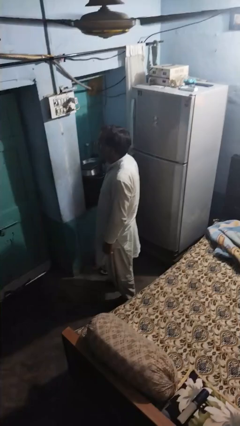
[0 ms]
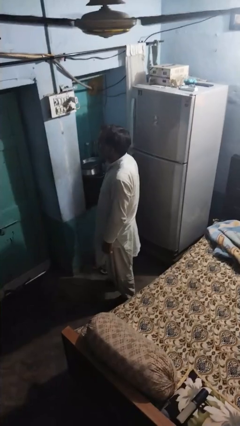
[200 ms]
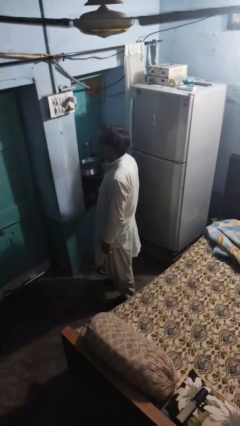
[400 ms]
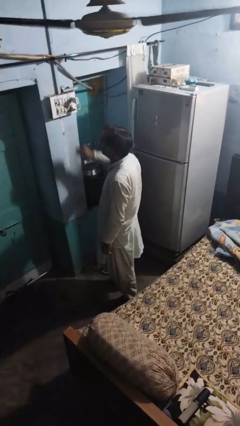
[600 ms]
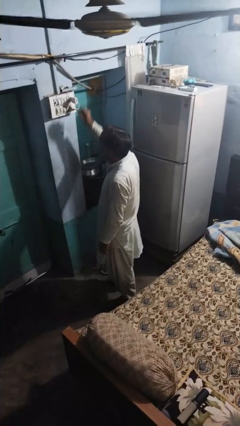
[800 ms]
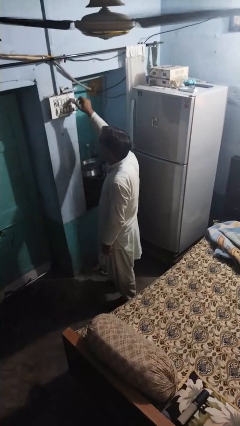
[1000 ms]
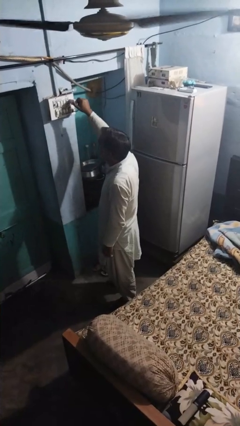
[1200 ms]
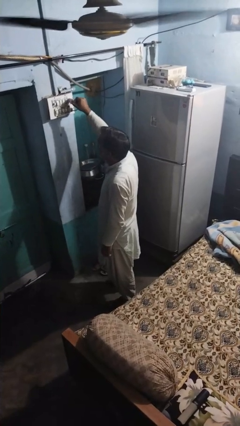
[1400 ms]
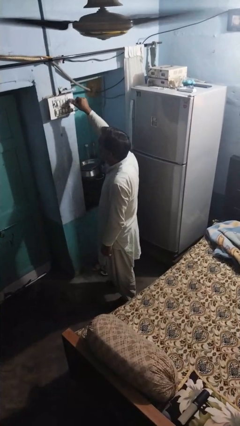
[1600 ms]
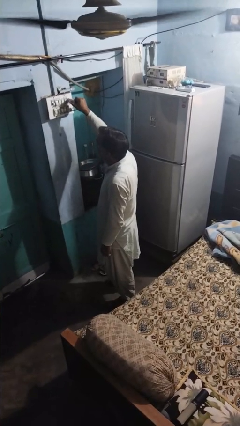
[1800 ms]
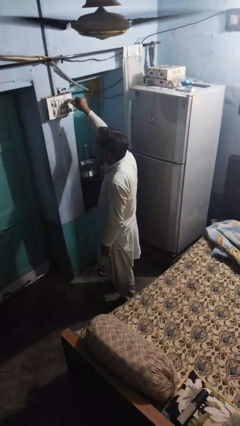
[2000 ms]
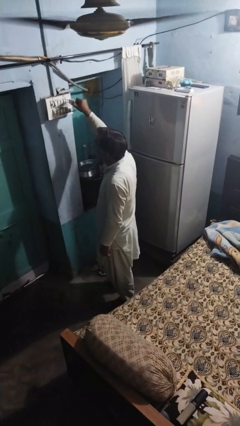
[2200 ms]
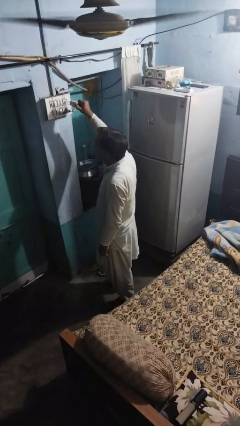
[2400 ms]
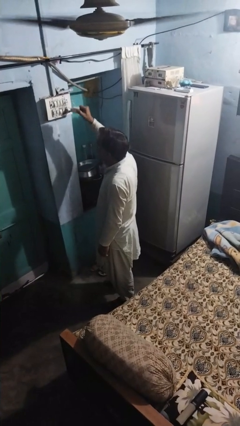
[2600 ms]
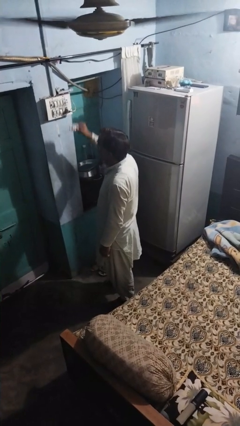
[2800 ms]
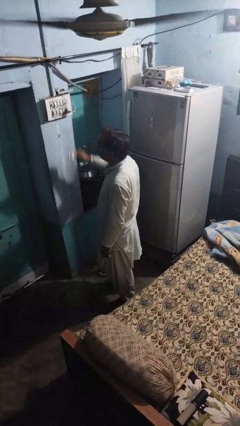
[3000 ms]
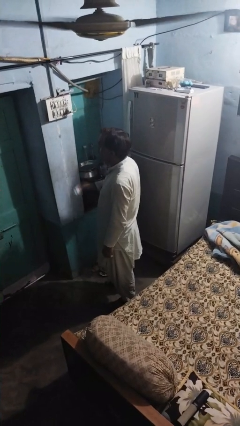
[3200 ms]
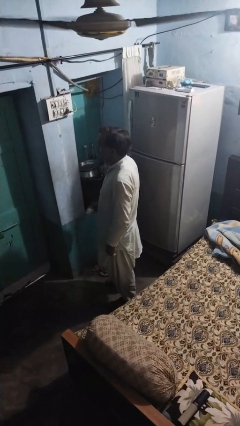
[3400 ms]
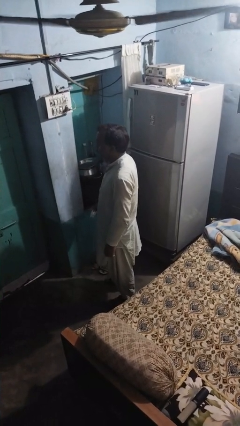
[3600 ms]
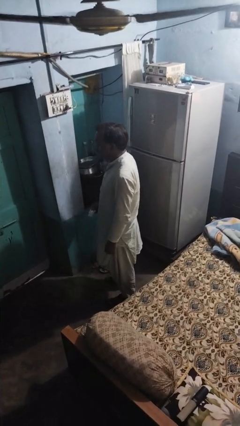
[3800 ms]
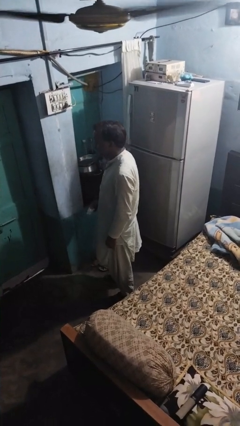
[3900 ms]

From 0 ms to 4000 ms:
person unplugs from electrical socket

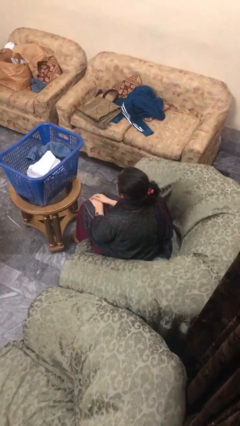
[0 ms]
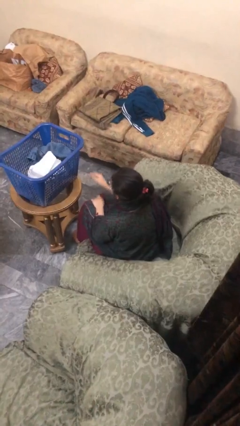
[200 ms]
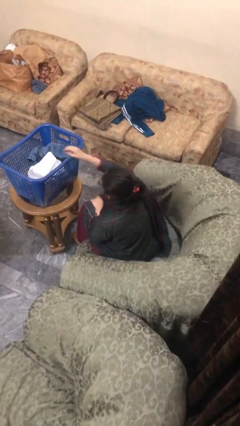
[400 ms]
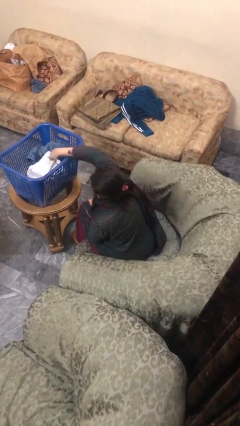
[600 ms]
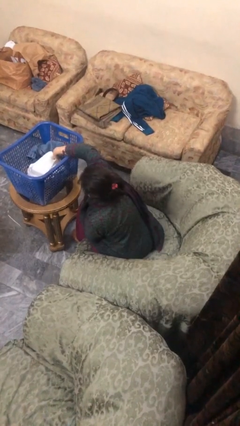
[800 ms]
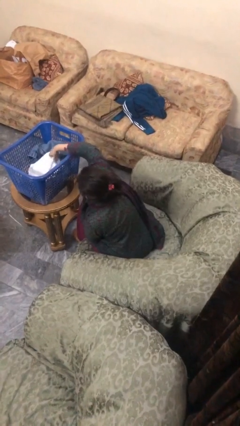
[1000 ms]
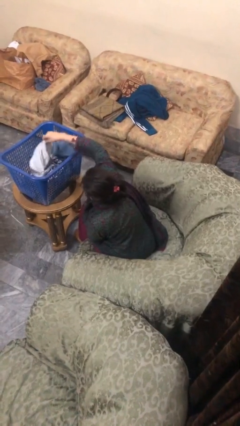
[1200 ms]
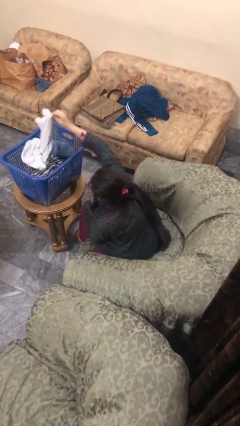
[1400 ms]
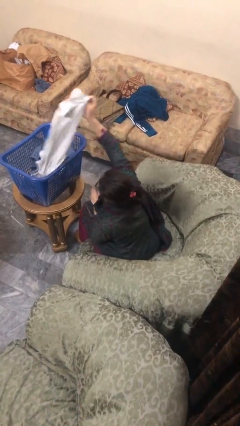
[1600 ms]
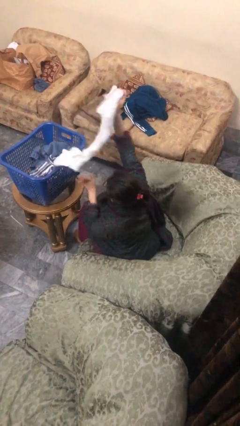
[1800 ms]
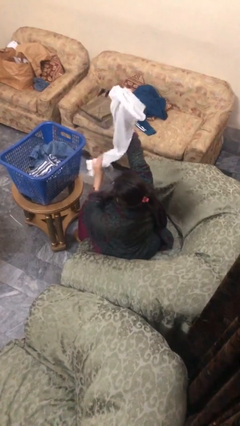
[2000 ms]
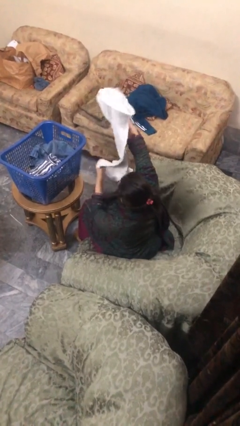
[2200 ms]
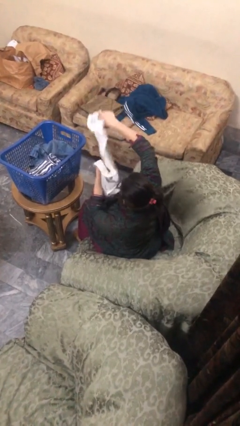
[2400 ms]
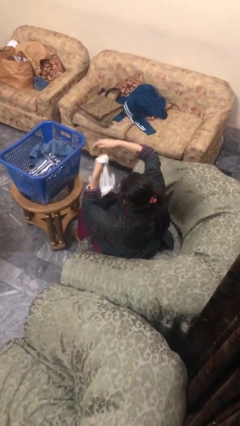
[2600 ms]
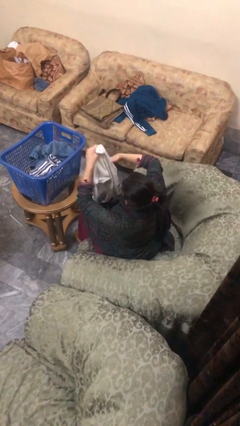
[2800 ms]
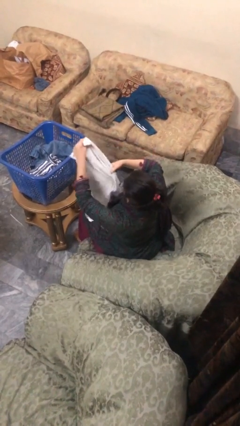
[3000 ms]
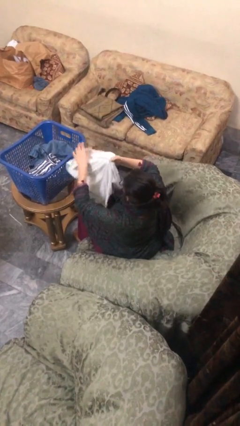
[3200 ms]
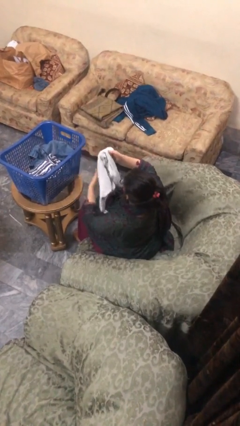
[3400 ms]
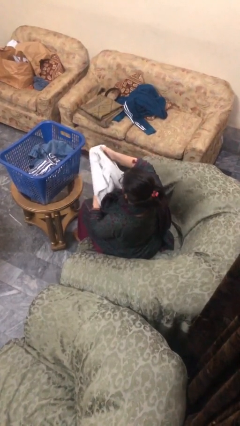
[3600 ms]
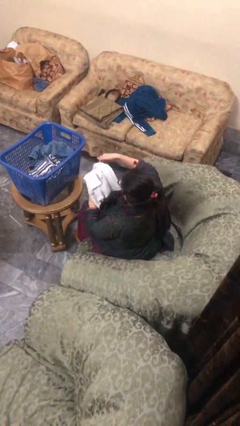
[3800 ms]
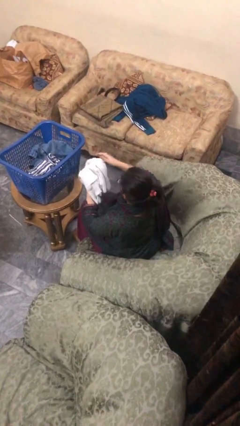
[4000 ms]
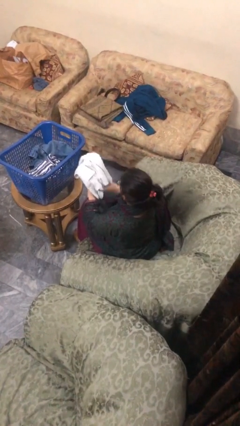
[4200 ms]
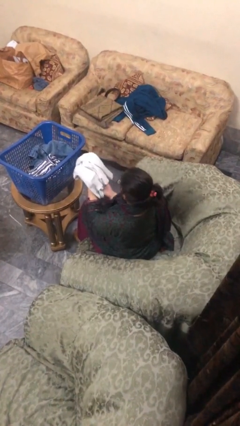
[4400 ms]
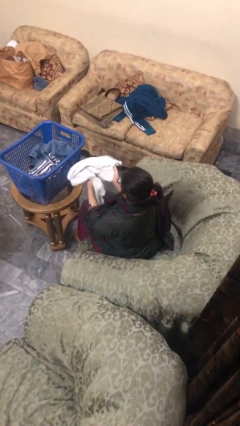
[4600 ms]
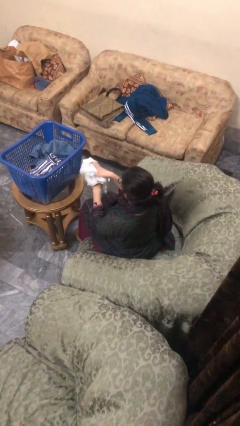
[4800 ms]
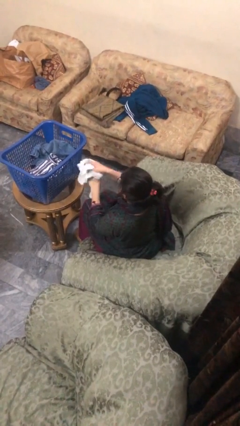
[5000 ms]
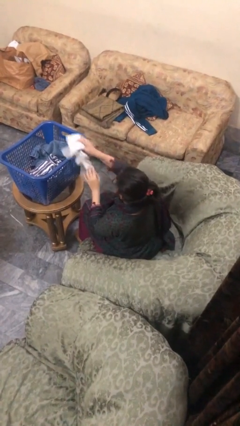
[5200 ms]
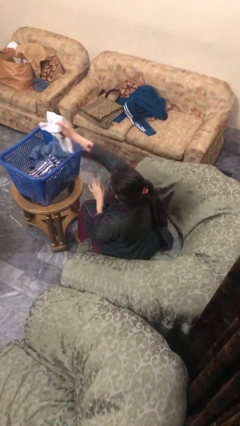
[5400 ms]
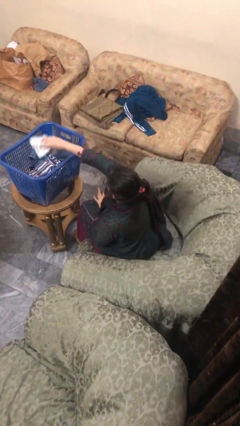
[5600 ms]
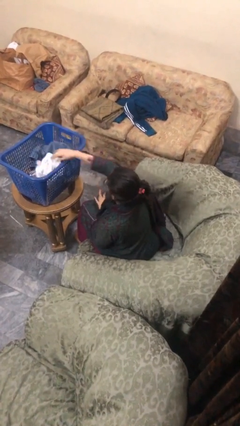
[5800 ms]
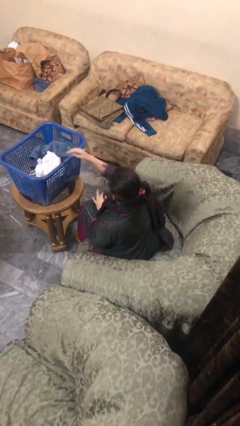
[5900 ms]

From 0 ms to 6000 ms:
person folds shirt

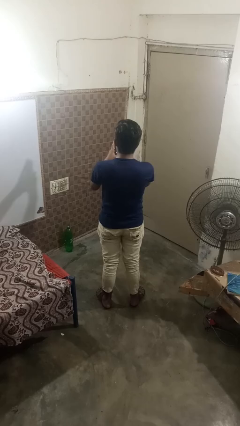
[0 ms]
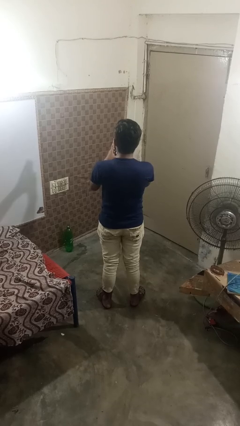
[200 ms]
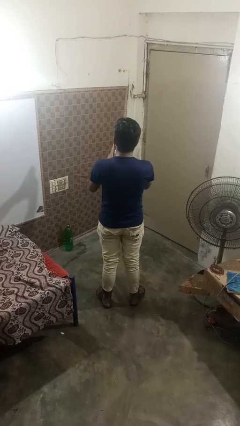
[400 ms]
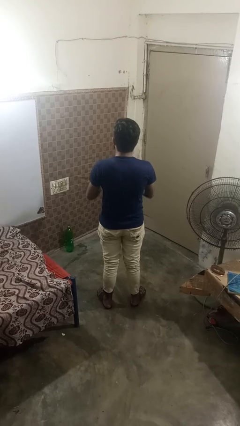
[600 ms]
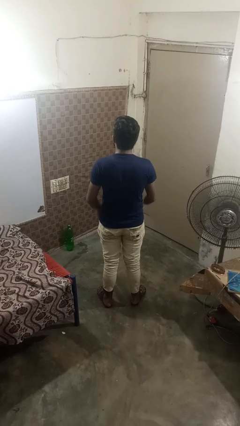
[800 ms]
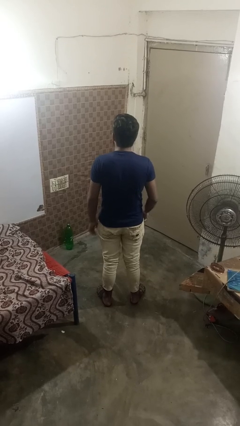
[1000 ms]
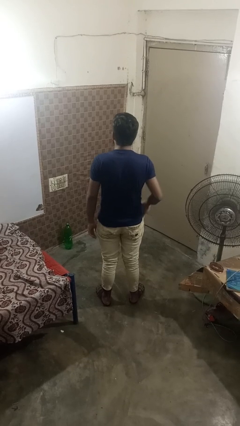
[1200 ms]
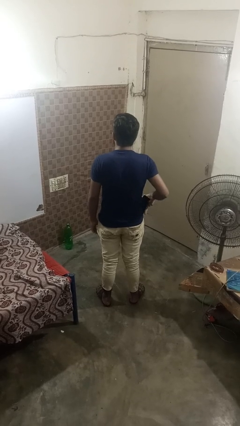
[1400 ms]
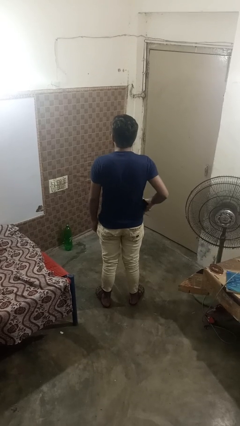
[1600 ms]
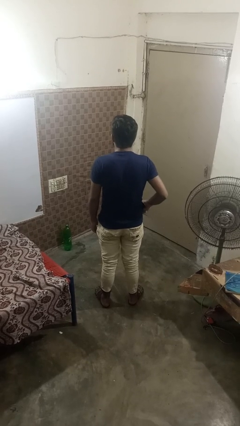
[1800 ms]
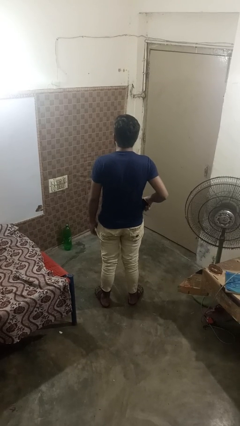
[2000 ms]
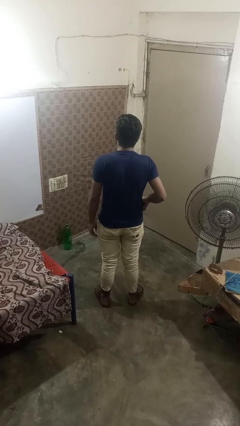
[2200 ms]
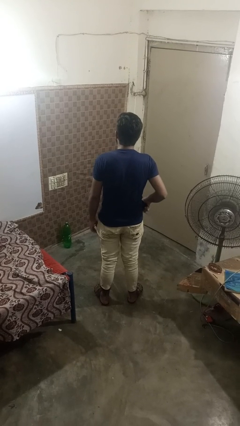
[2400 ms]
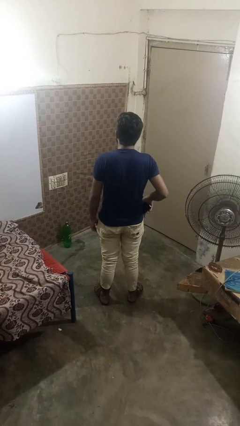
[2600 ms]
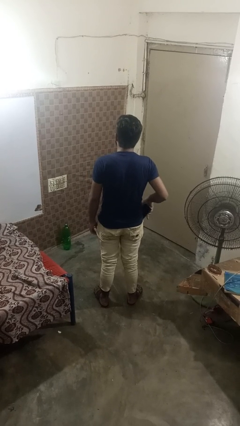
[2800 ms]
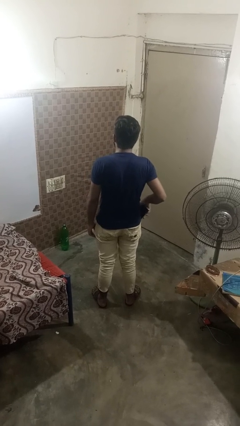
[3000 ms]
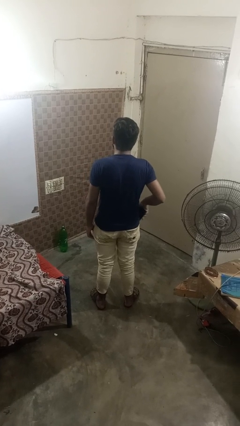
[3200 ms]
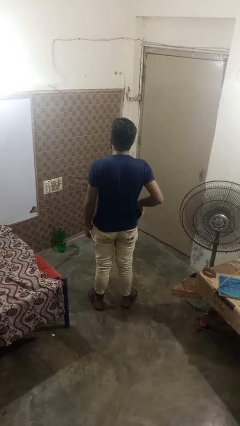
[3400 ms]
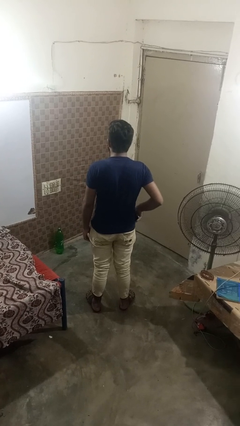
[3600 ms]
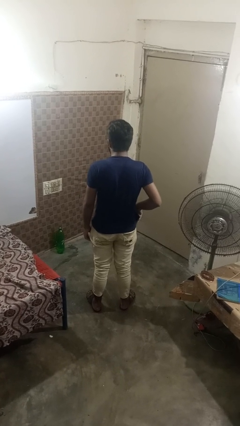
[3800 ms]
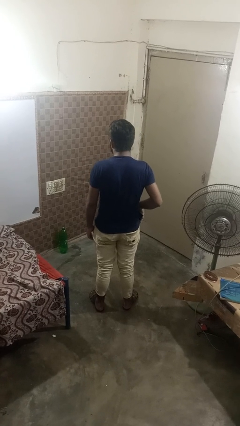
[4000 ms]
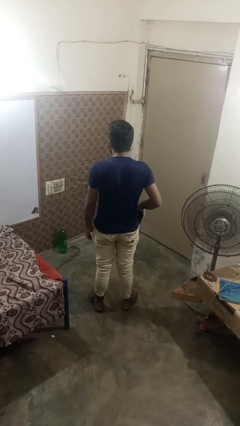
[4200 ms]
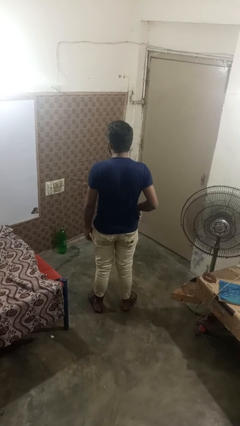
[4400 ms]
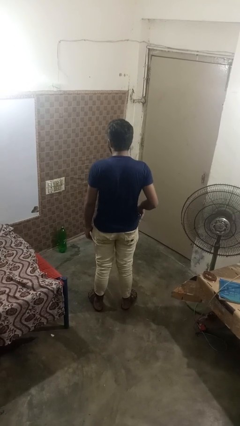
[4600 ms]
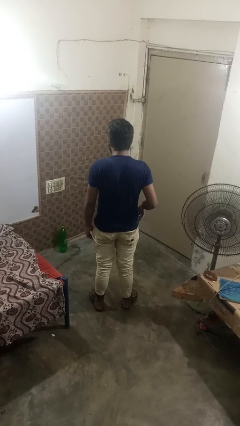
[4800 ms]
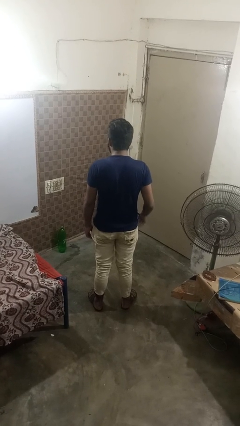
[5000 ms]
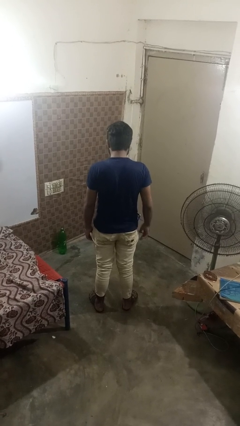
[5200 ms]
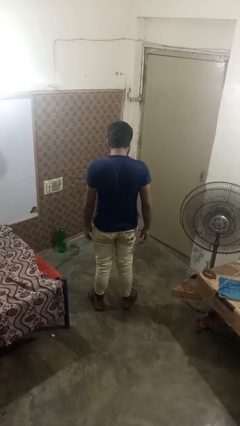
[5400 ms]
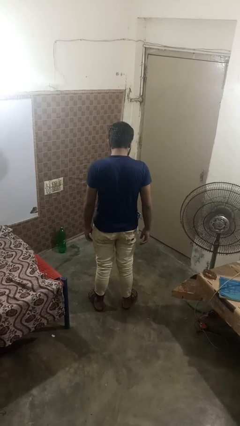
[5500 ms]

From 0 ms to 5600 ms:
person puts phone into pocket

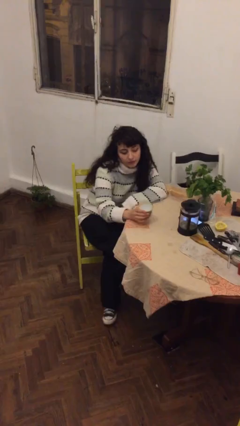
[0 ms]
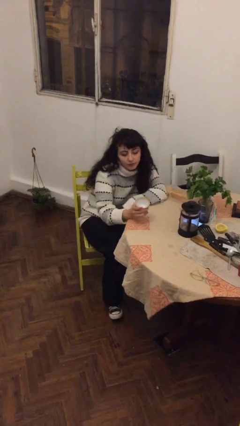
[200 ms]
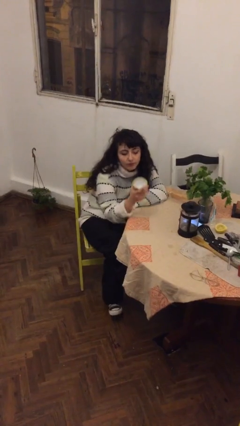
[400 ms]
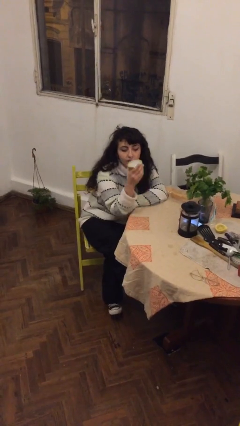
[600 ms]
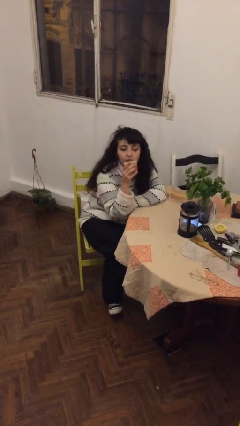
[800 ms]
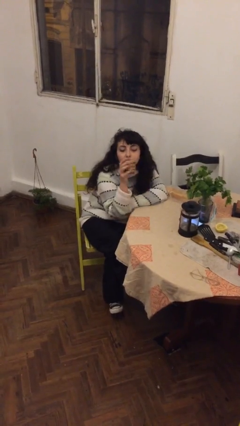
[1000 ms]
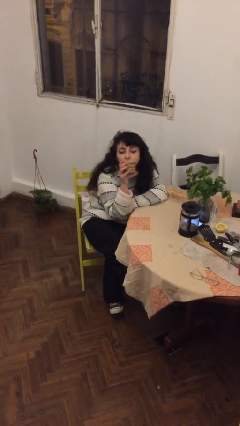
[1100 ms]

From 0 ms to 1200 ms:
person picks up object from table

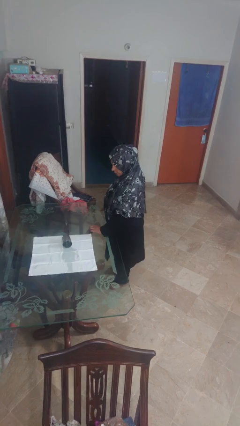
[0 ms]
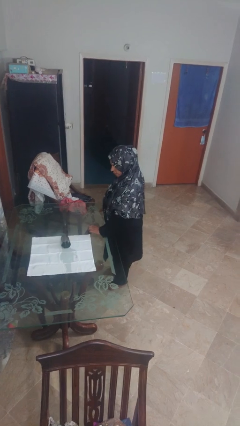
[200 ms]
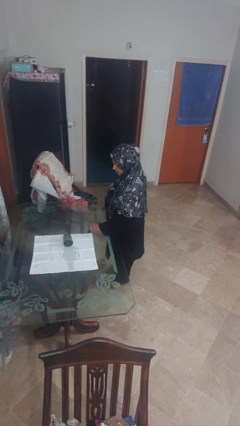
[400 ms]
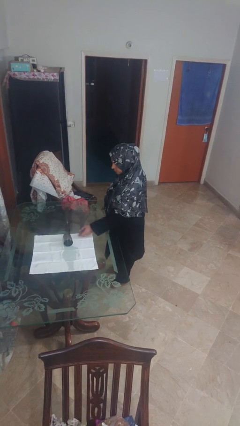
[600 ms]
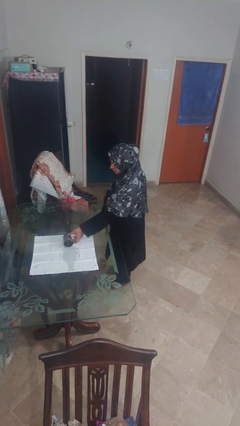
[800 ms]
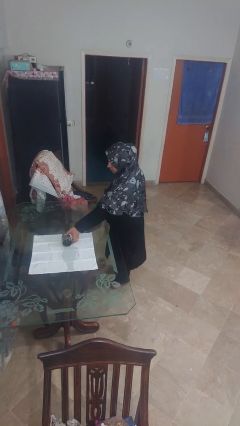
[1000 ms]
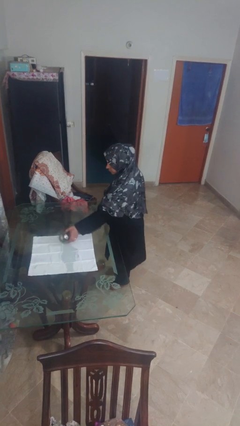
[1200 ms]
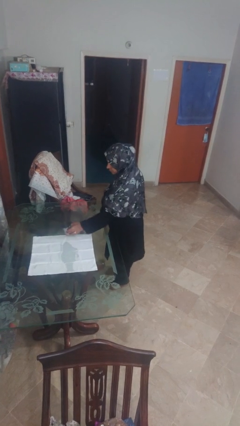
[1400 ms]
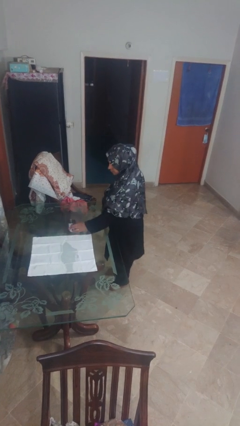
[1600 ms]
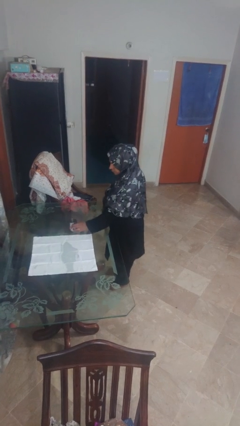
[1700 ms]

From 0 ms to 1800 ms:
person sets upright glass
